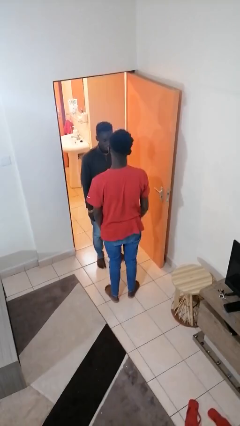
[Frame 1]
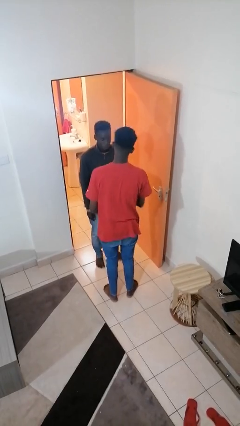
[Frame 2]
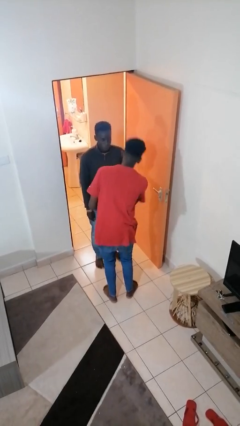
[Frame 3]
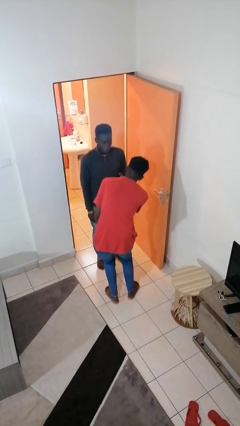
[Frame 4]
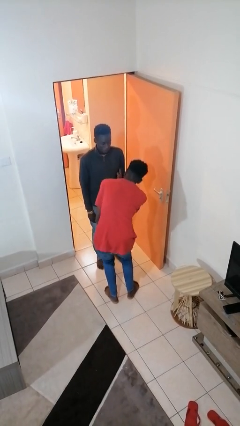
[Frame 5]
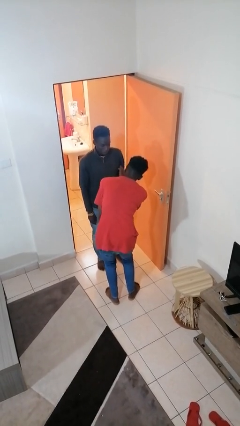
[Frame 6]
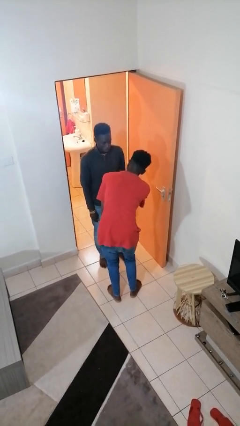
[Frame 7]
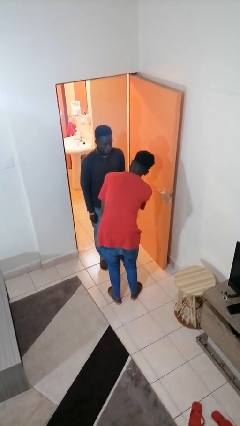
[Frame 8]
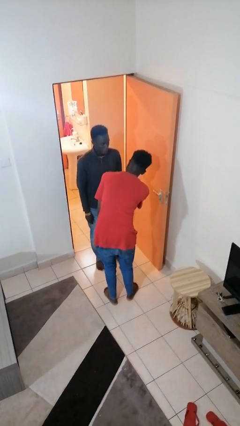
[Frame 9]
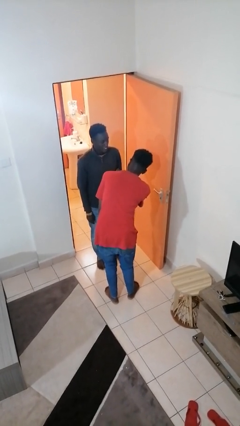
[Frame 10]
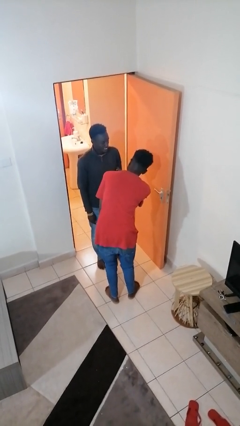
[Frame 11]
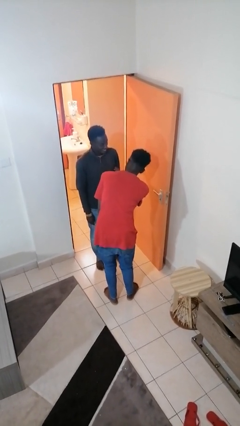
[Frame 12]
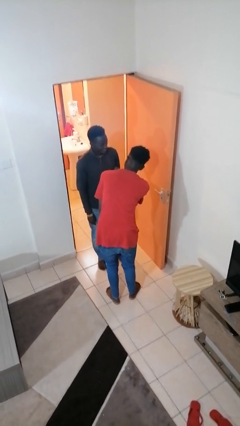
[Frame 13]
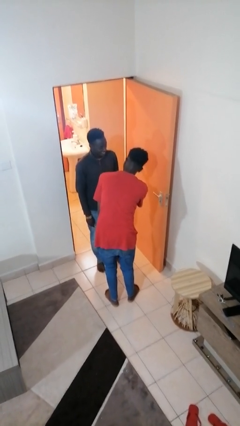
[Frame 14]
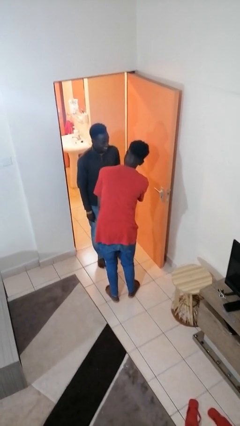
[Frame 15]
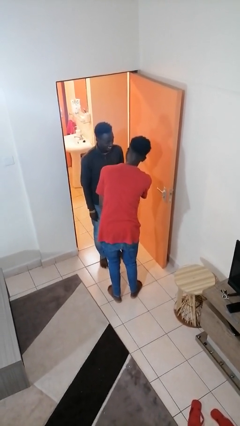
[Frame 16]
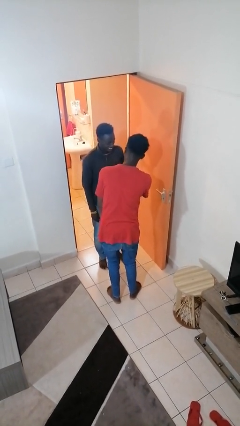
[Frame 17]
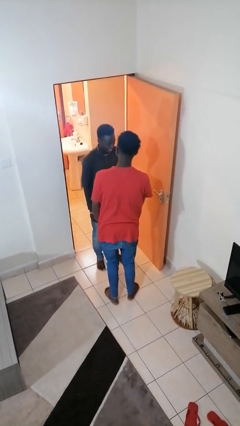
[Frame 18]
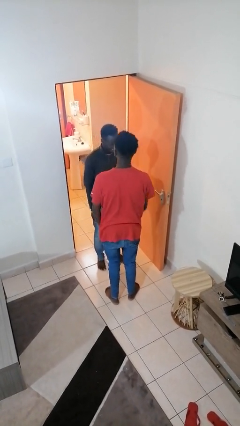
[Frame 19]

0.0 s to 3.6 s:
person tickles person

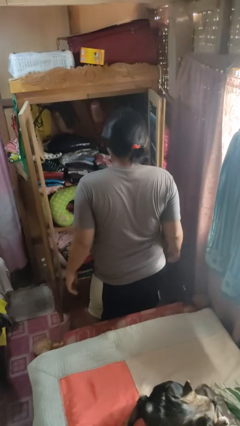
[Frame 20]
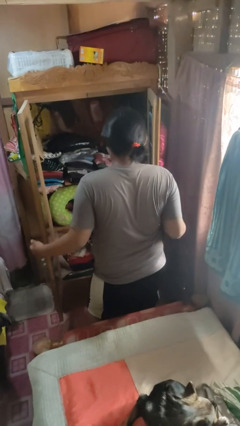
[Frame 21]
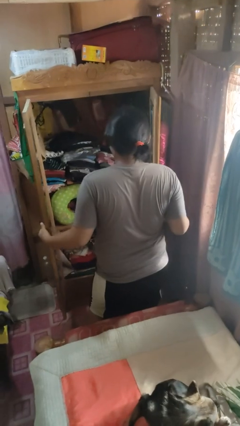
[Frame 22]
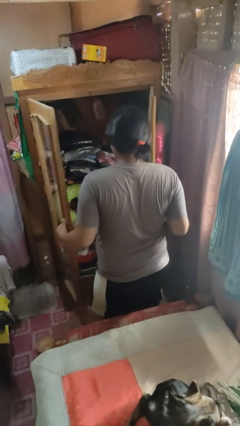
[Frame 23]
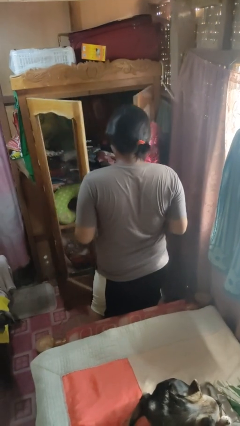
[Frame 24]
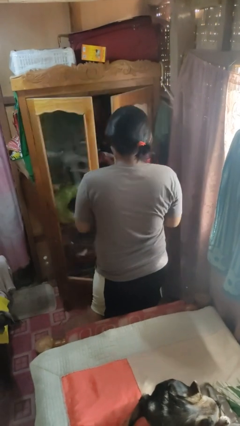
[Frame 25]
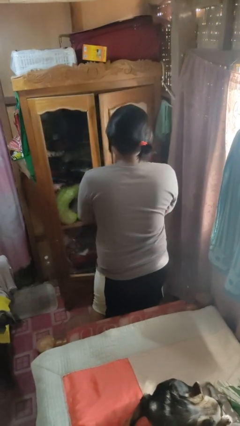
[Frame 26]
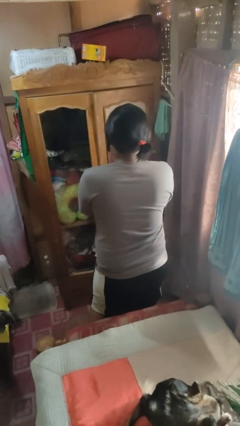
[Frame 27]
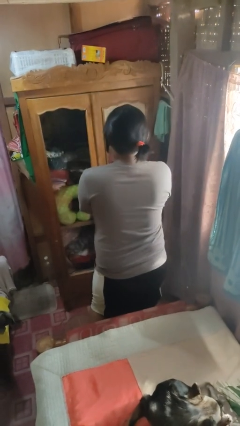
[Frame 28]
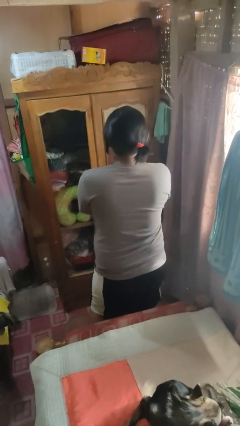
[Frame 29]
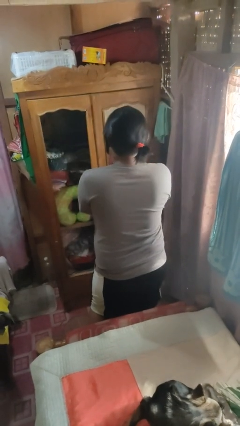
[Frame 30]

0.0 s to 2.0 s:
person closes closet door

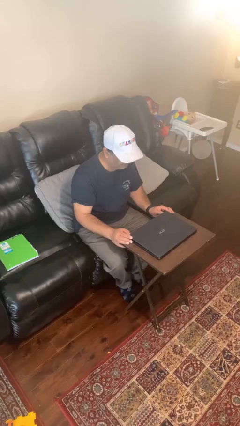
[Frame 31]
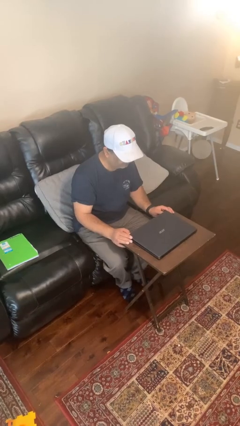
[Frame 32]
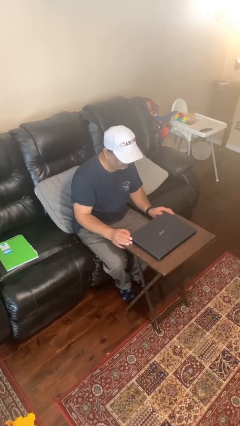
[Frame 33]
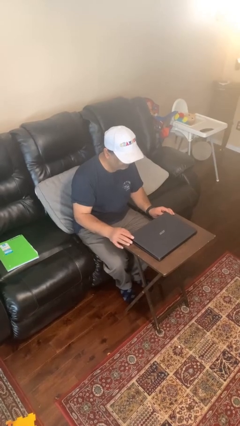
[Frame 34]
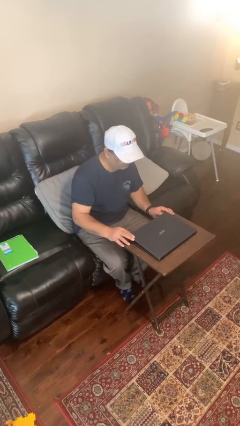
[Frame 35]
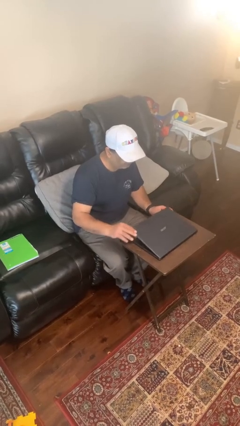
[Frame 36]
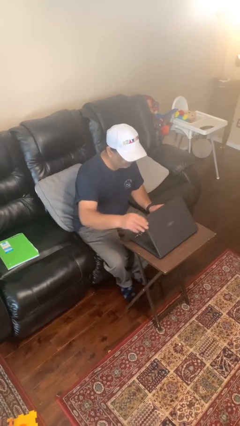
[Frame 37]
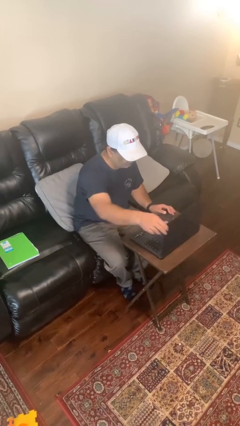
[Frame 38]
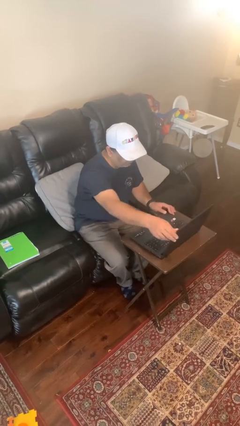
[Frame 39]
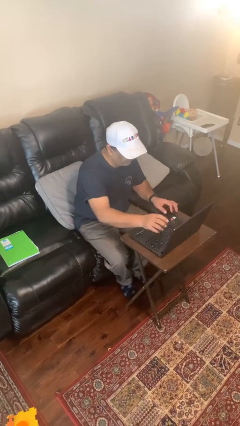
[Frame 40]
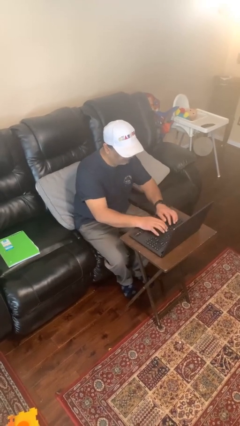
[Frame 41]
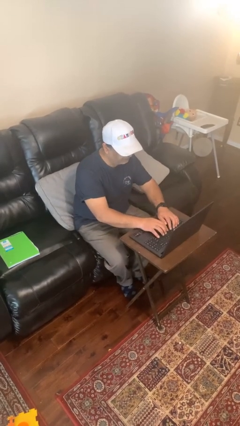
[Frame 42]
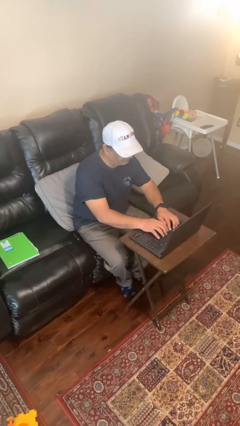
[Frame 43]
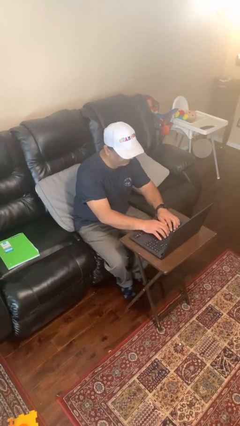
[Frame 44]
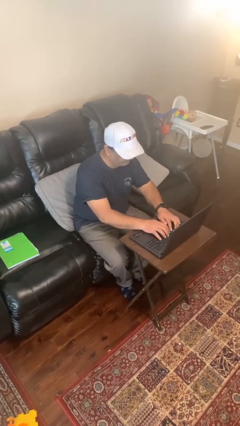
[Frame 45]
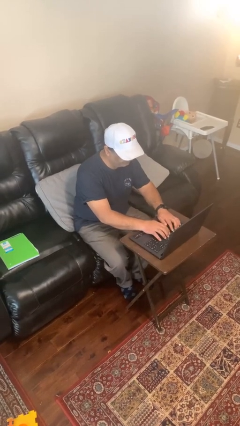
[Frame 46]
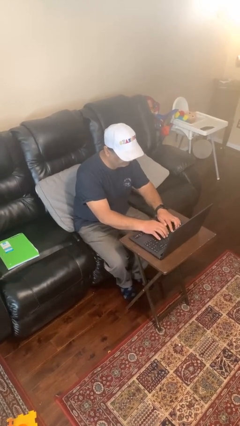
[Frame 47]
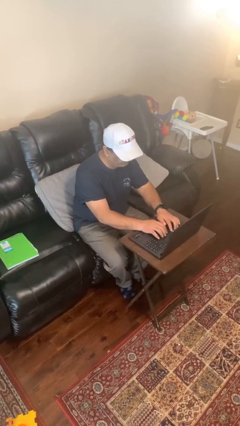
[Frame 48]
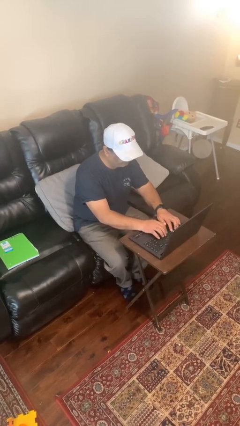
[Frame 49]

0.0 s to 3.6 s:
person interacts with laptop

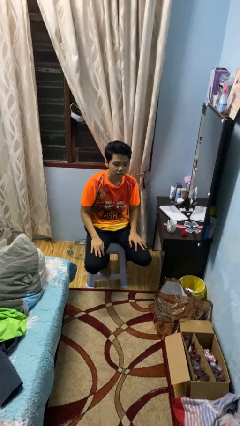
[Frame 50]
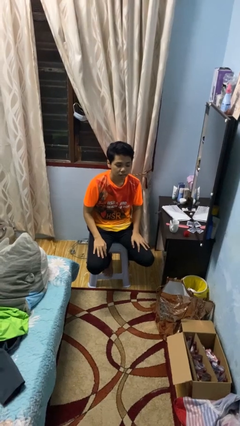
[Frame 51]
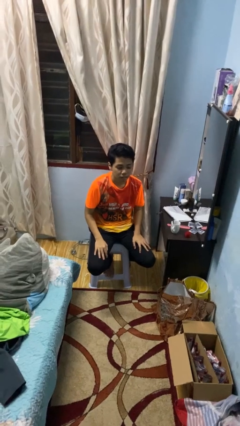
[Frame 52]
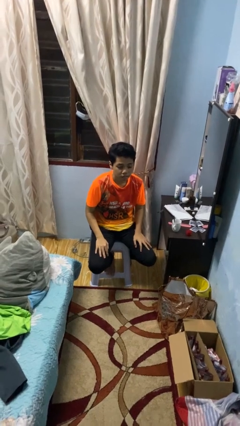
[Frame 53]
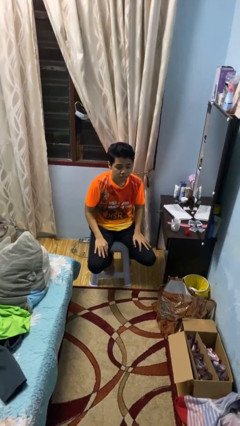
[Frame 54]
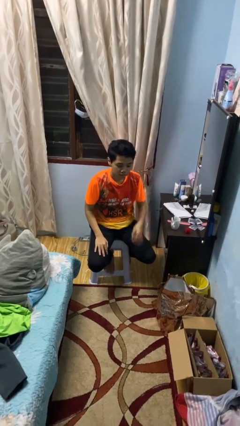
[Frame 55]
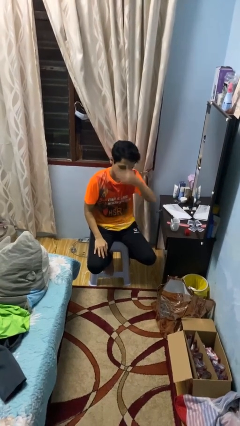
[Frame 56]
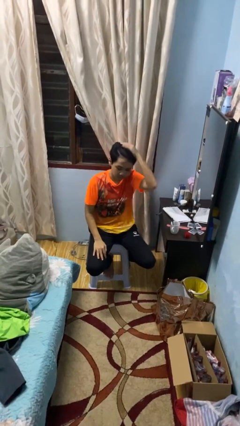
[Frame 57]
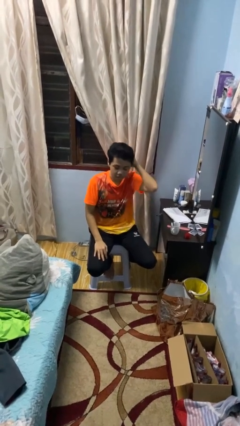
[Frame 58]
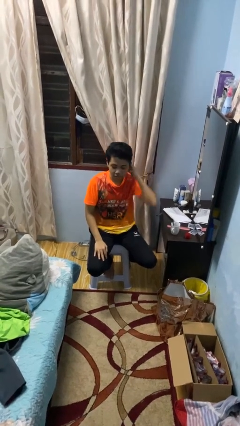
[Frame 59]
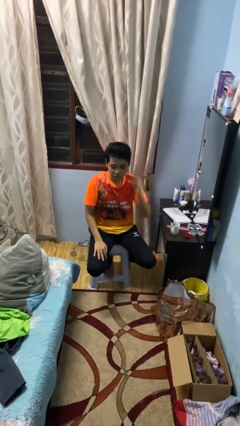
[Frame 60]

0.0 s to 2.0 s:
person strokes hair

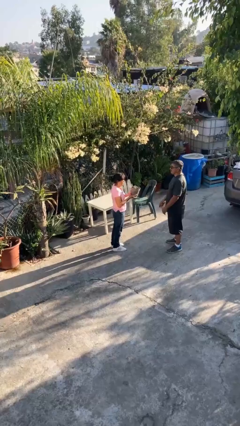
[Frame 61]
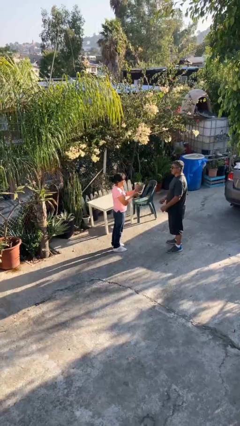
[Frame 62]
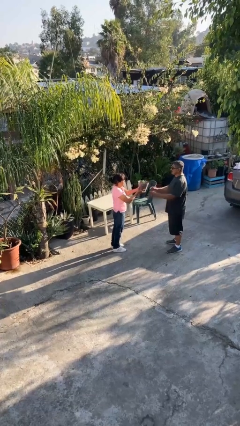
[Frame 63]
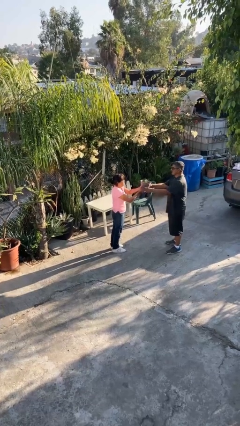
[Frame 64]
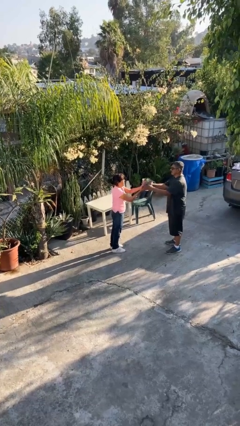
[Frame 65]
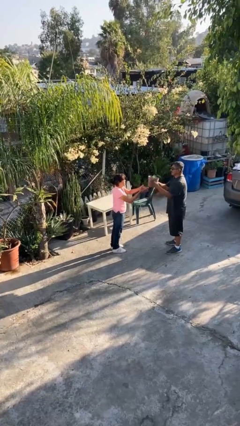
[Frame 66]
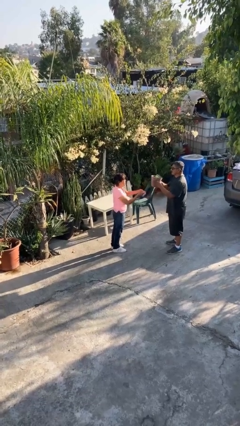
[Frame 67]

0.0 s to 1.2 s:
person transfers object to person

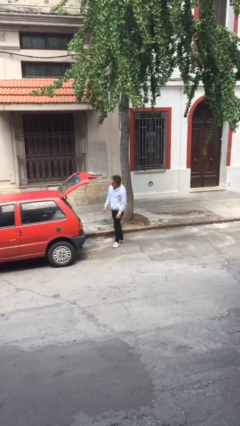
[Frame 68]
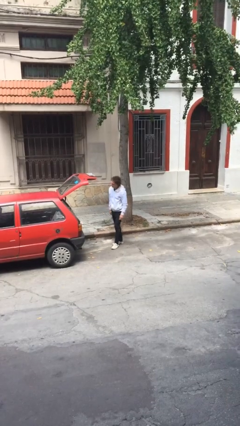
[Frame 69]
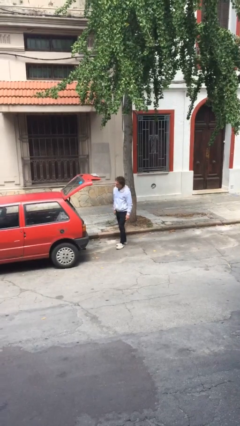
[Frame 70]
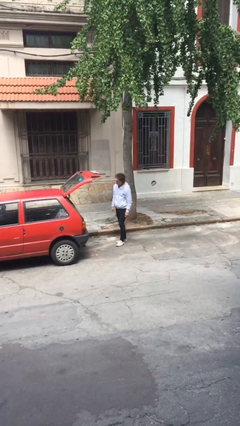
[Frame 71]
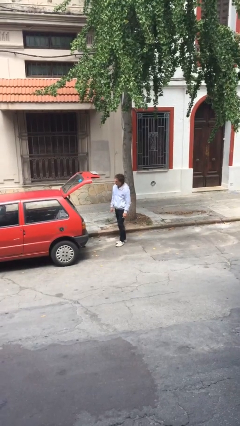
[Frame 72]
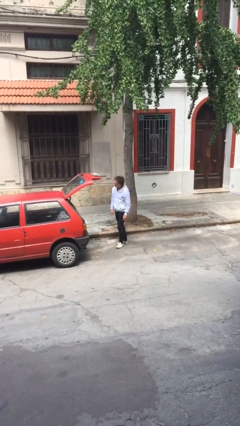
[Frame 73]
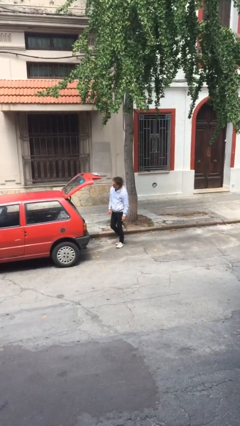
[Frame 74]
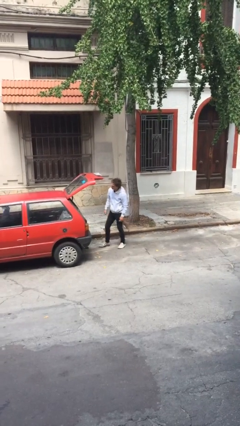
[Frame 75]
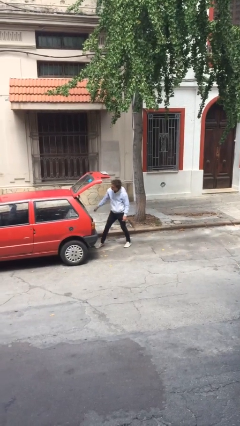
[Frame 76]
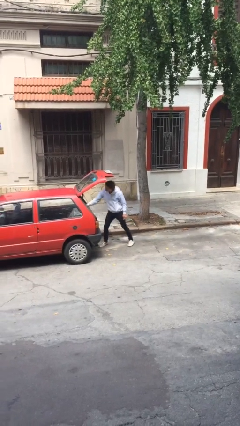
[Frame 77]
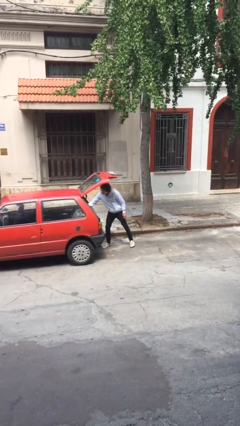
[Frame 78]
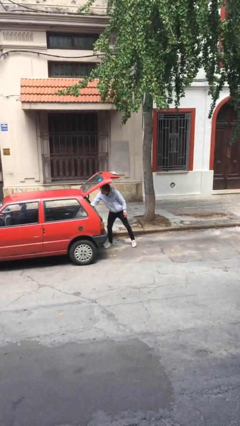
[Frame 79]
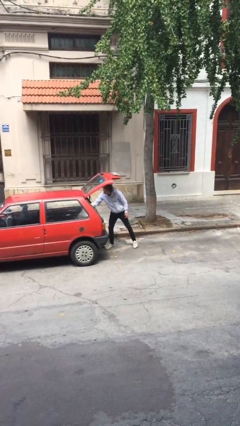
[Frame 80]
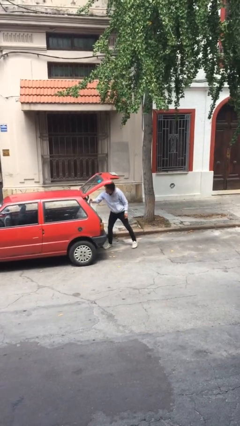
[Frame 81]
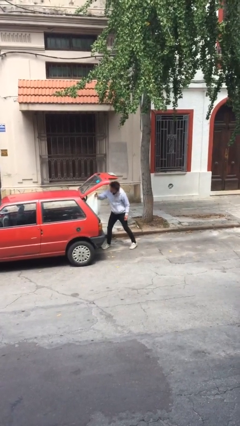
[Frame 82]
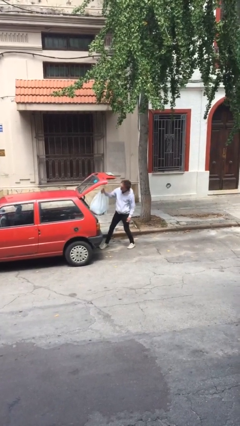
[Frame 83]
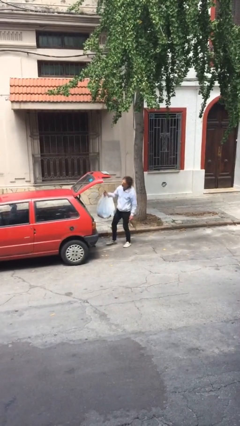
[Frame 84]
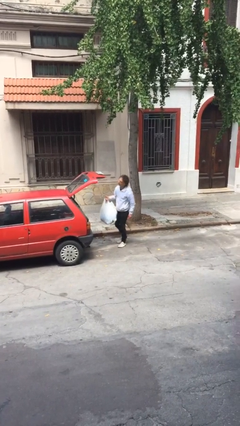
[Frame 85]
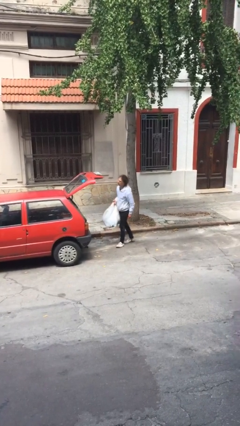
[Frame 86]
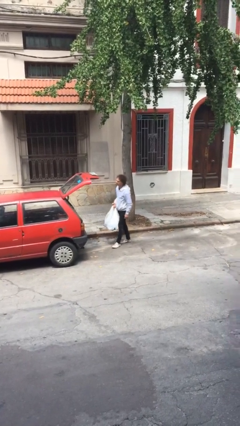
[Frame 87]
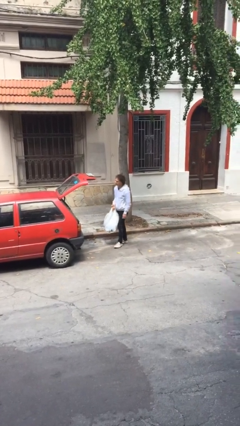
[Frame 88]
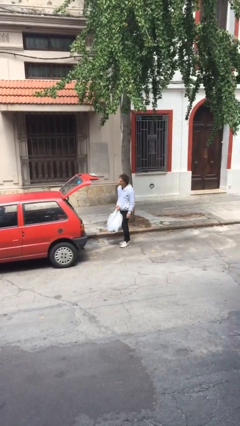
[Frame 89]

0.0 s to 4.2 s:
person unloads car

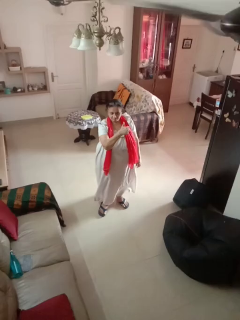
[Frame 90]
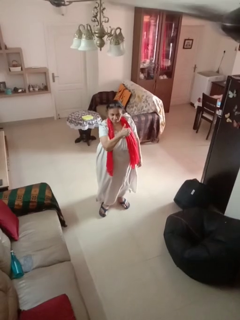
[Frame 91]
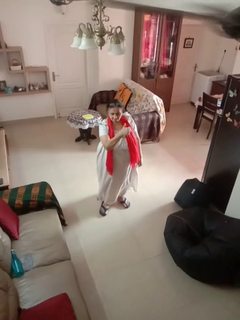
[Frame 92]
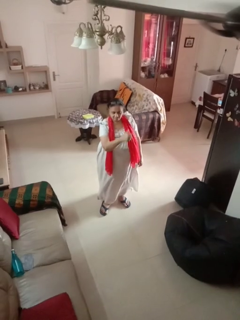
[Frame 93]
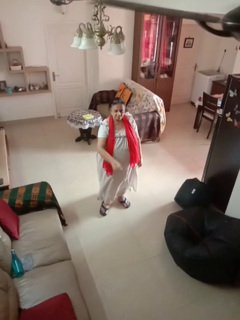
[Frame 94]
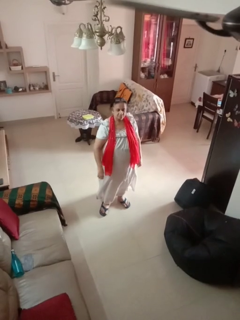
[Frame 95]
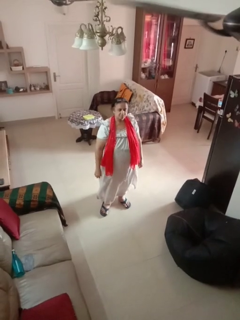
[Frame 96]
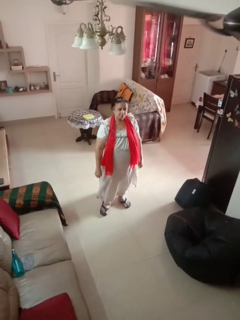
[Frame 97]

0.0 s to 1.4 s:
person gestures thumbs up
